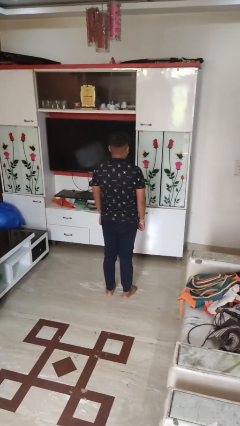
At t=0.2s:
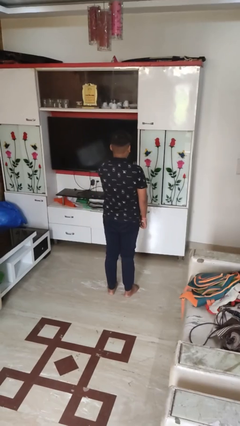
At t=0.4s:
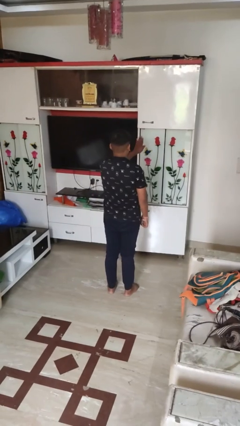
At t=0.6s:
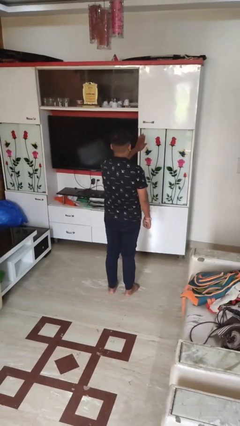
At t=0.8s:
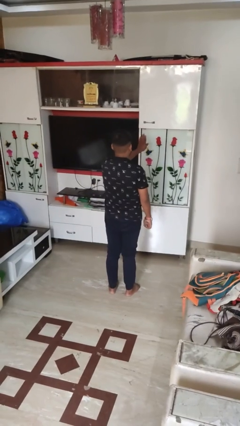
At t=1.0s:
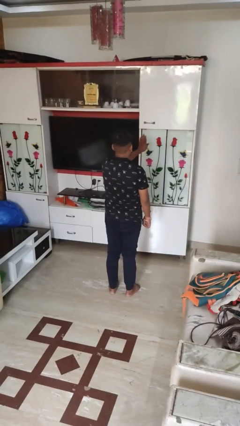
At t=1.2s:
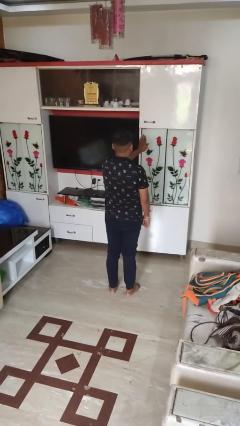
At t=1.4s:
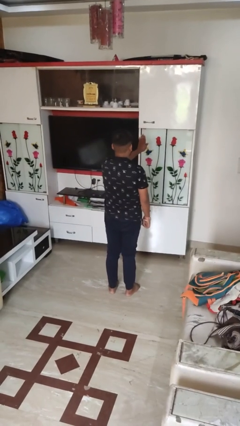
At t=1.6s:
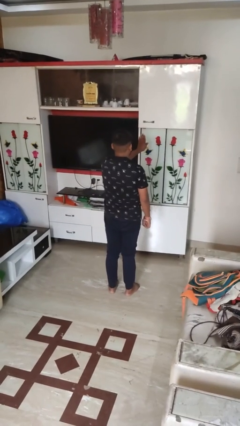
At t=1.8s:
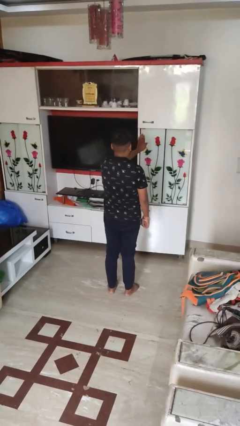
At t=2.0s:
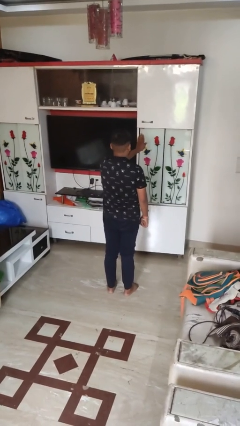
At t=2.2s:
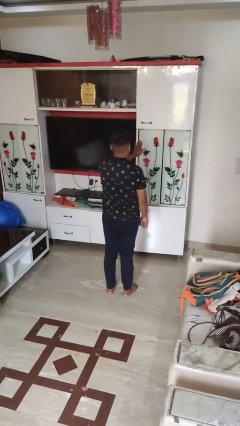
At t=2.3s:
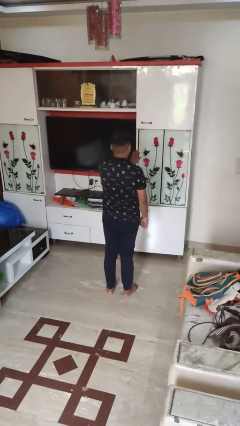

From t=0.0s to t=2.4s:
person gestures stop

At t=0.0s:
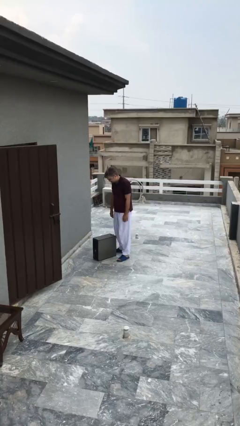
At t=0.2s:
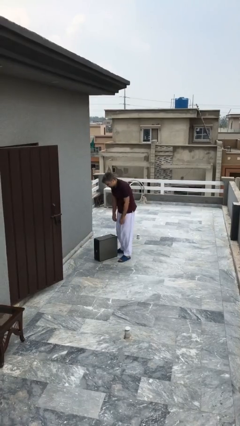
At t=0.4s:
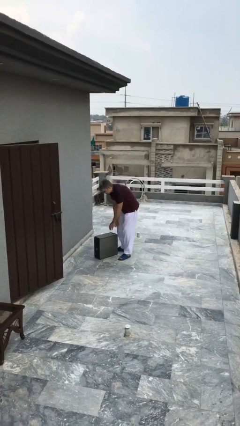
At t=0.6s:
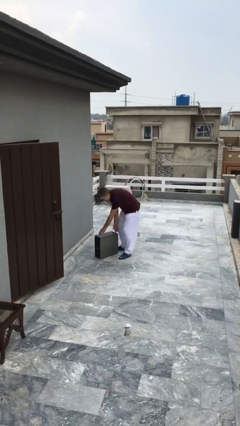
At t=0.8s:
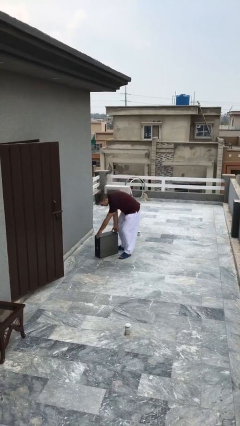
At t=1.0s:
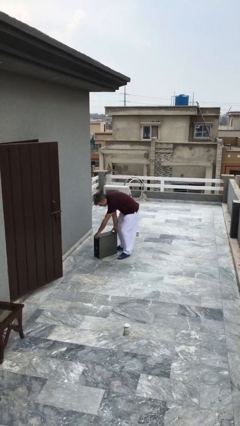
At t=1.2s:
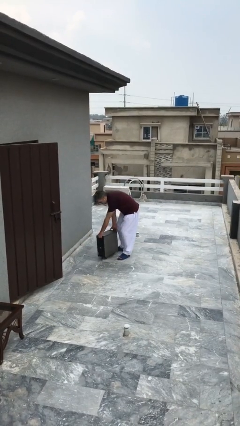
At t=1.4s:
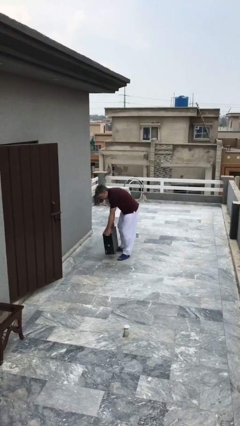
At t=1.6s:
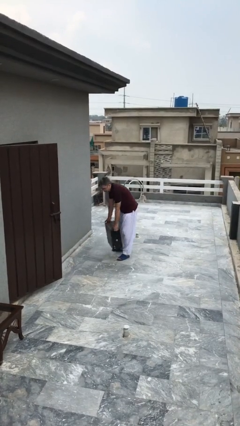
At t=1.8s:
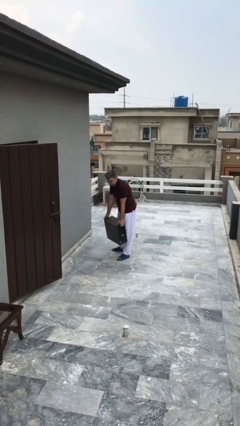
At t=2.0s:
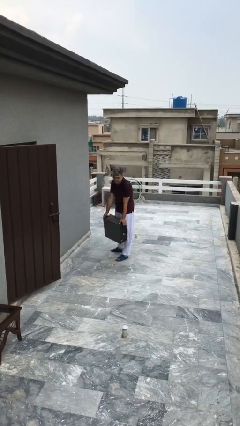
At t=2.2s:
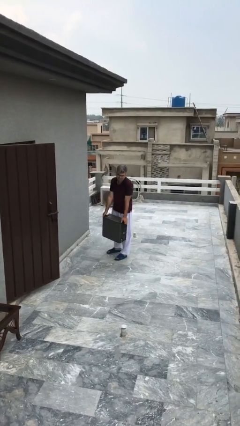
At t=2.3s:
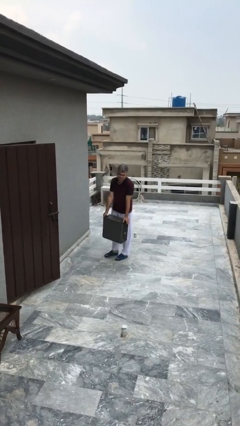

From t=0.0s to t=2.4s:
person picks up object from floor

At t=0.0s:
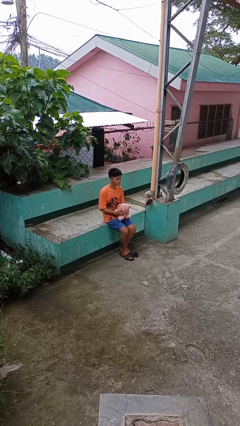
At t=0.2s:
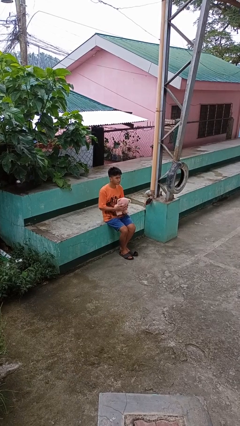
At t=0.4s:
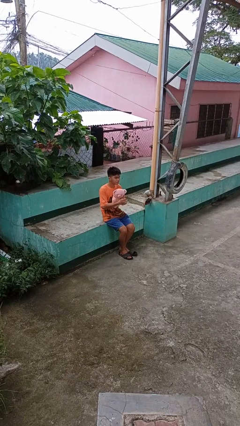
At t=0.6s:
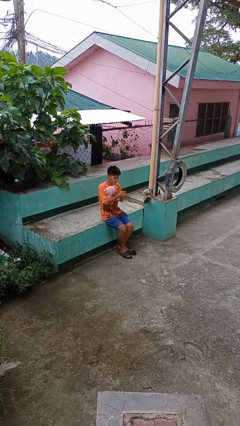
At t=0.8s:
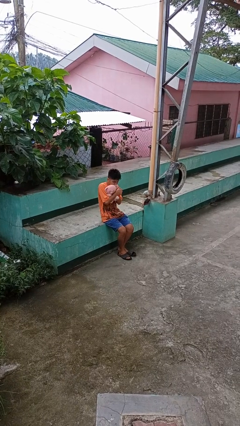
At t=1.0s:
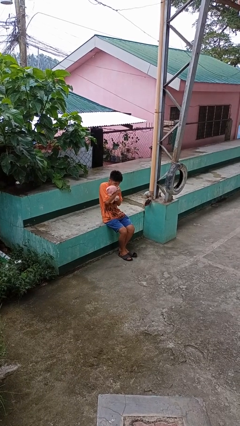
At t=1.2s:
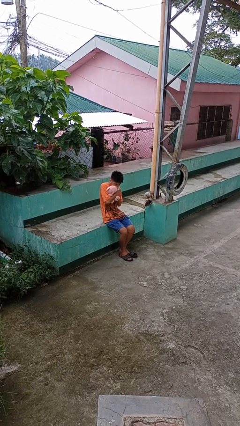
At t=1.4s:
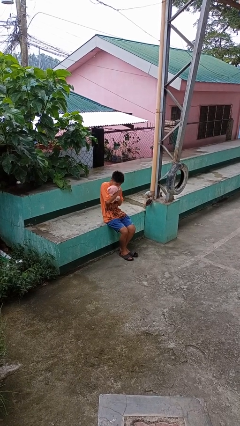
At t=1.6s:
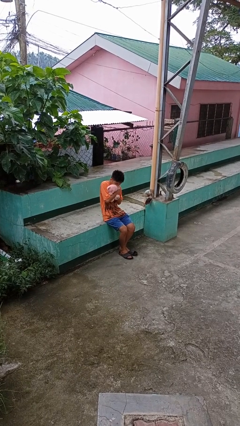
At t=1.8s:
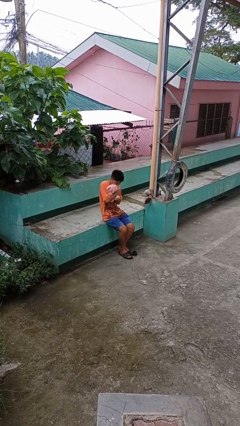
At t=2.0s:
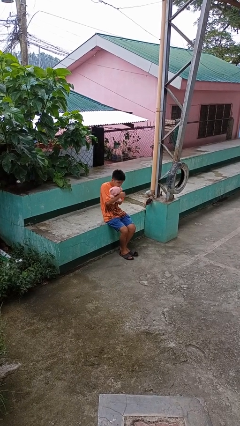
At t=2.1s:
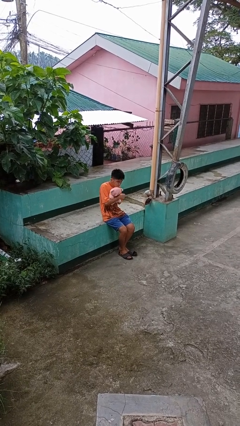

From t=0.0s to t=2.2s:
person hugs stuffed animal

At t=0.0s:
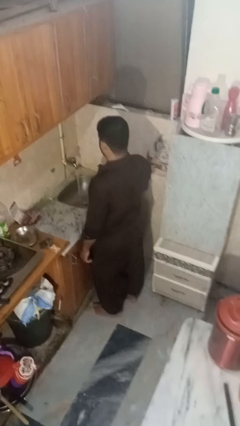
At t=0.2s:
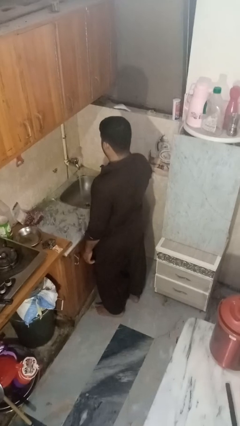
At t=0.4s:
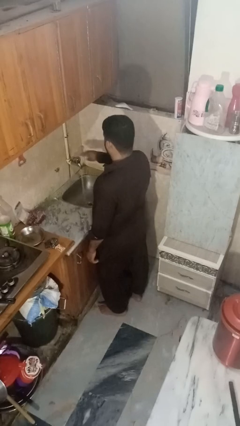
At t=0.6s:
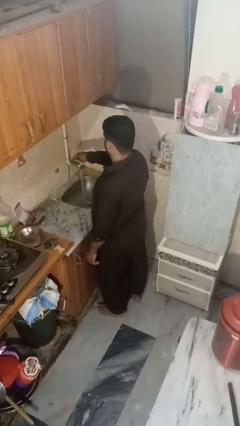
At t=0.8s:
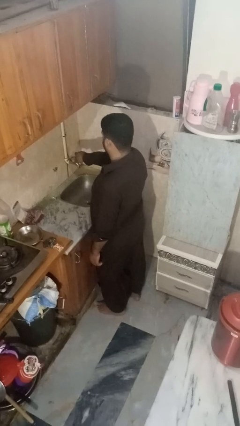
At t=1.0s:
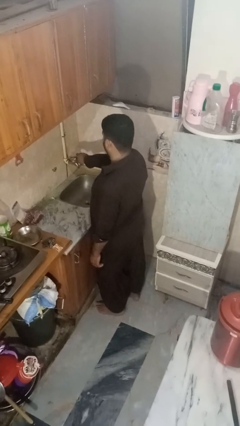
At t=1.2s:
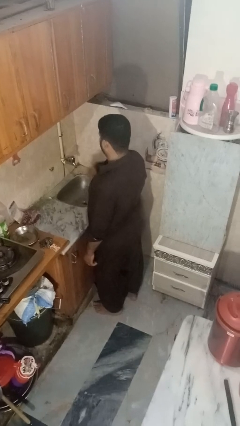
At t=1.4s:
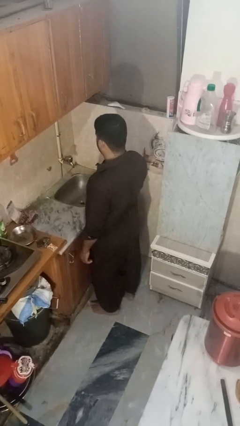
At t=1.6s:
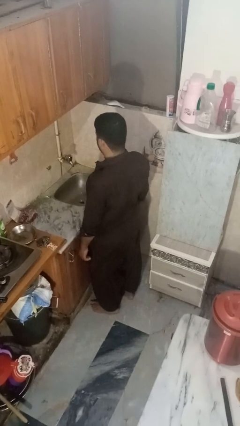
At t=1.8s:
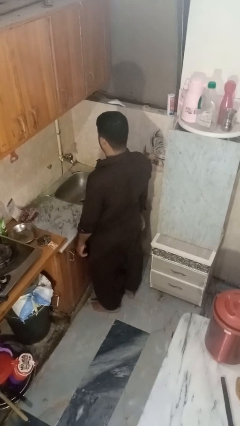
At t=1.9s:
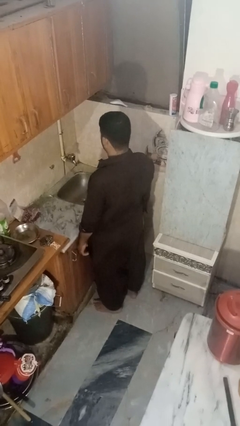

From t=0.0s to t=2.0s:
person turns off faucet

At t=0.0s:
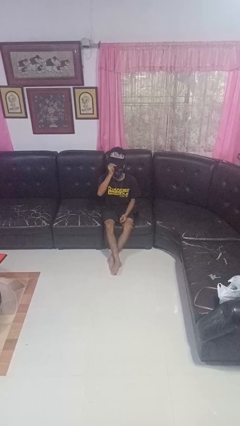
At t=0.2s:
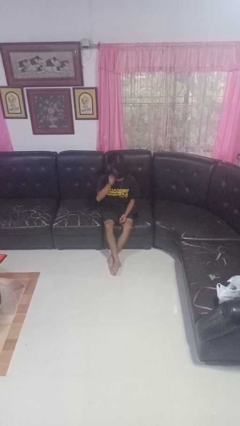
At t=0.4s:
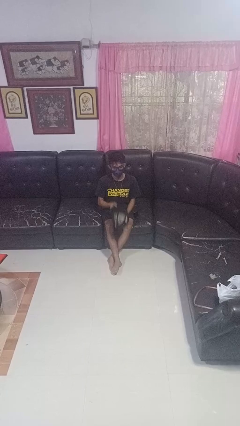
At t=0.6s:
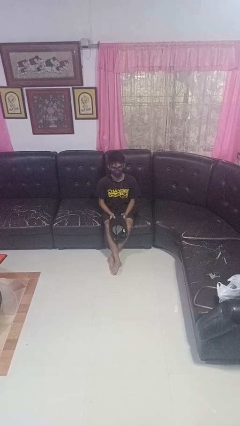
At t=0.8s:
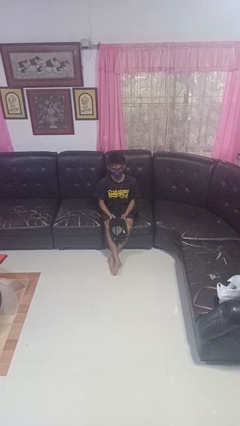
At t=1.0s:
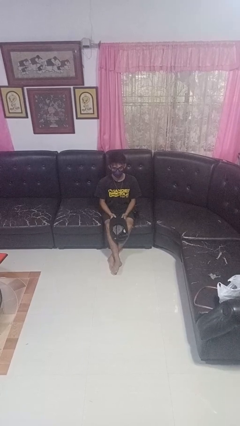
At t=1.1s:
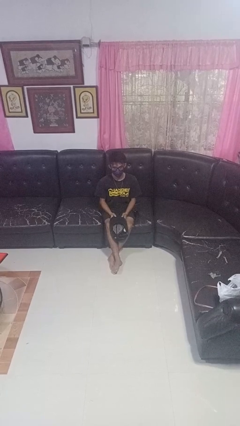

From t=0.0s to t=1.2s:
person takes off hat

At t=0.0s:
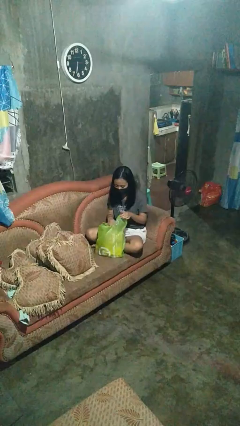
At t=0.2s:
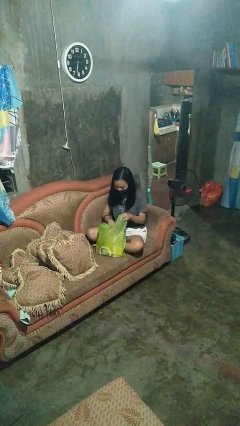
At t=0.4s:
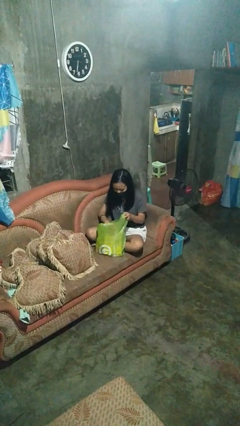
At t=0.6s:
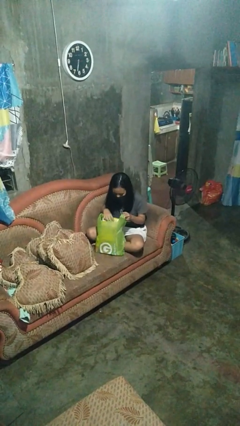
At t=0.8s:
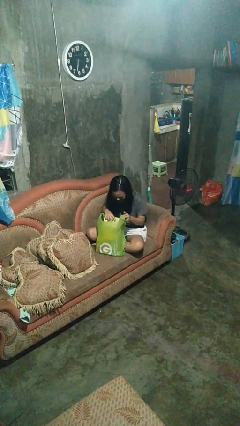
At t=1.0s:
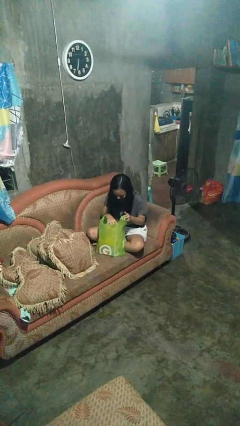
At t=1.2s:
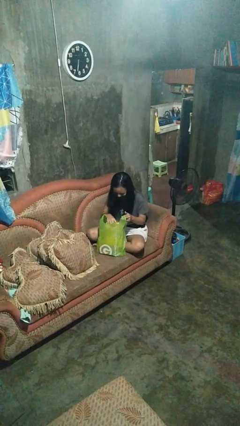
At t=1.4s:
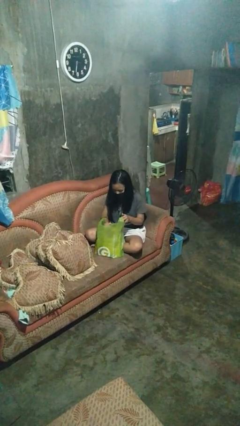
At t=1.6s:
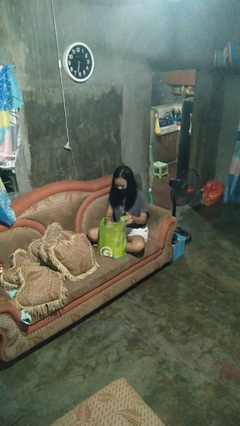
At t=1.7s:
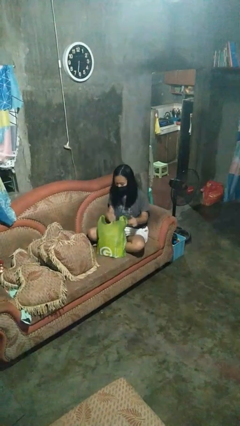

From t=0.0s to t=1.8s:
person searches in bag

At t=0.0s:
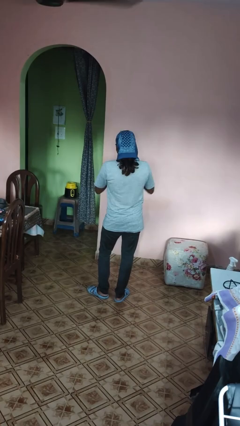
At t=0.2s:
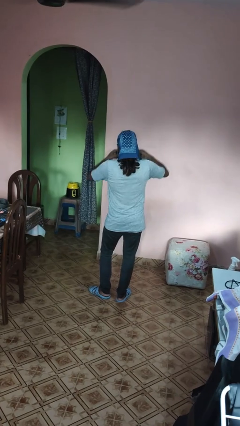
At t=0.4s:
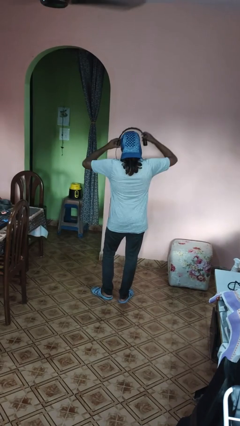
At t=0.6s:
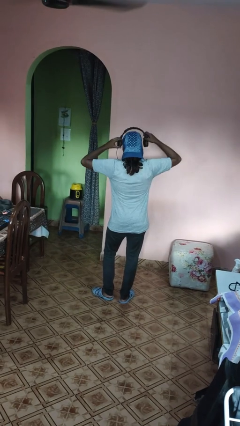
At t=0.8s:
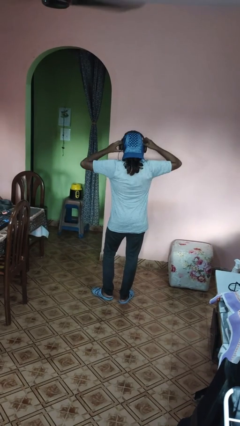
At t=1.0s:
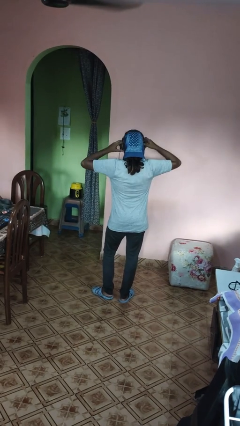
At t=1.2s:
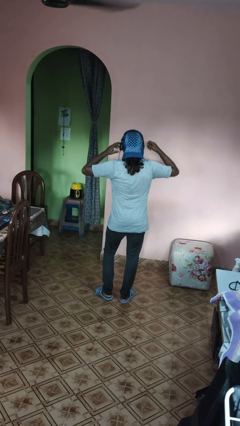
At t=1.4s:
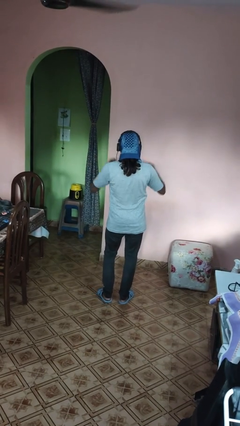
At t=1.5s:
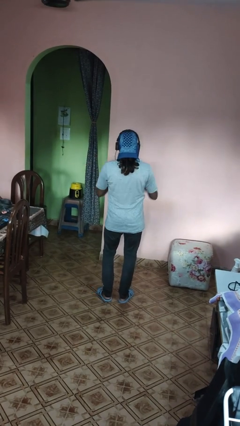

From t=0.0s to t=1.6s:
person puts on headphones

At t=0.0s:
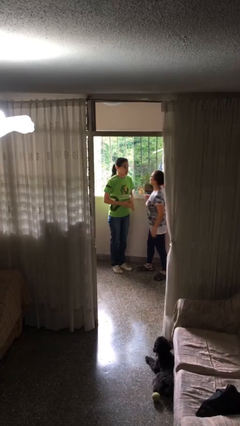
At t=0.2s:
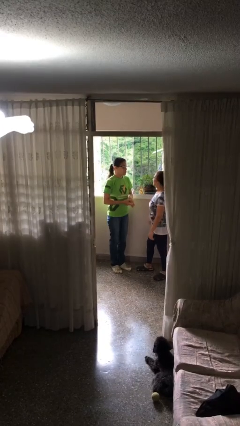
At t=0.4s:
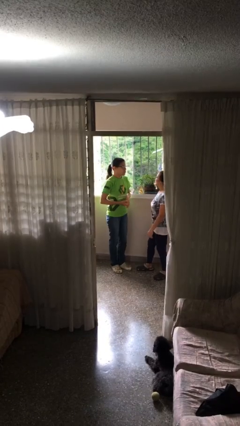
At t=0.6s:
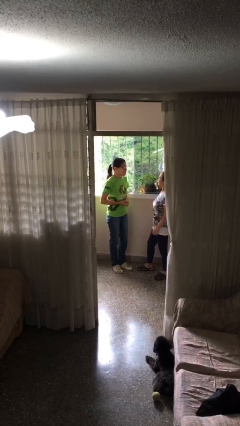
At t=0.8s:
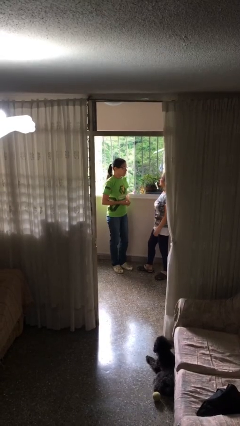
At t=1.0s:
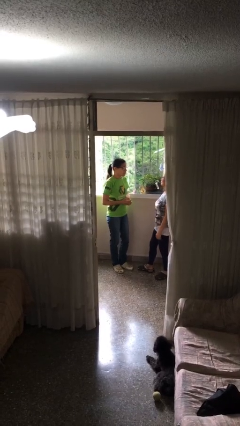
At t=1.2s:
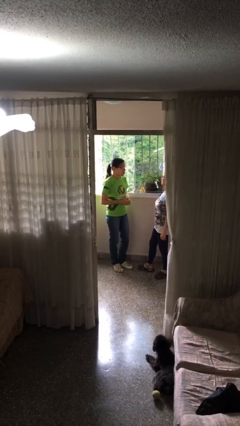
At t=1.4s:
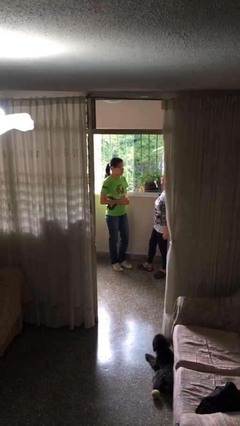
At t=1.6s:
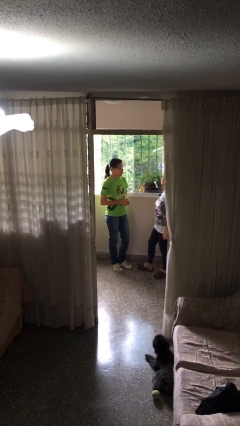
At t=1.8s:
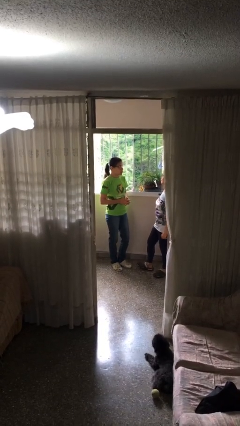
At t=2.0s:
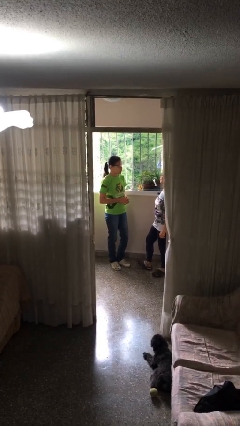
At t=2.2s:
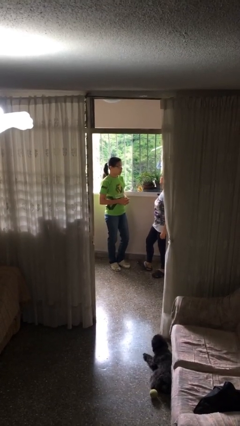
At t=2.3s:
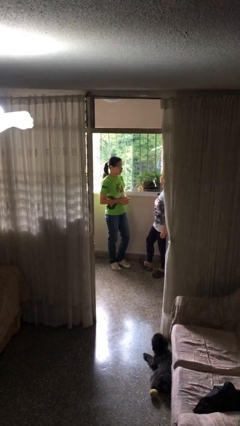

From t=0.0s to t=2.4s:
person talks to person

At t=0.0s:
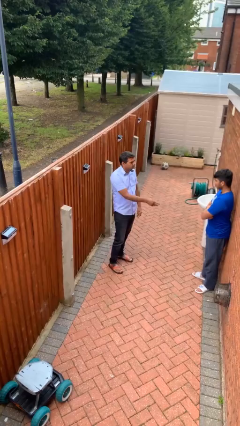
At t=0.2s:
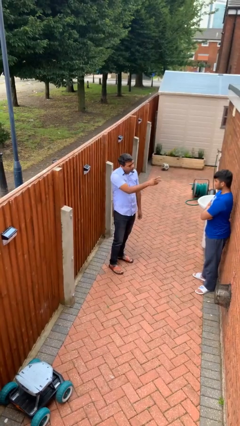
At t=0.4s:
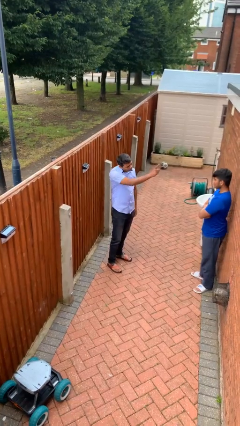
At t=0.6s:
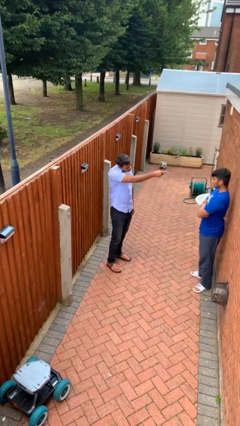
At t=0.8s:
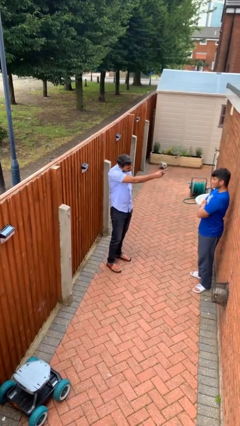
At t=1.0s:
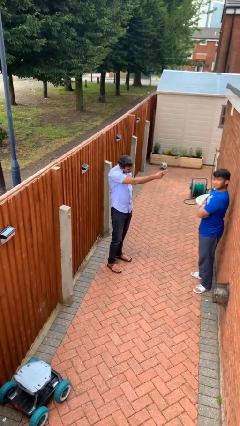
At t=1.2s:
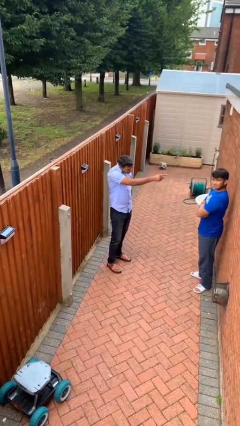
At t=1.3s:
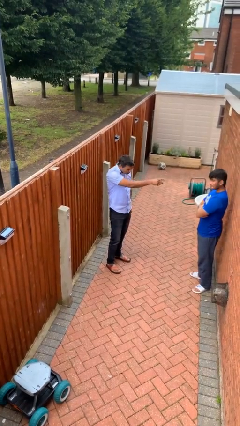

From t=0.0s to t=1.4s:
person points at person
